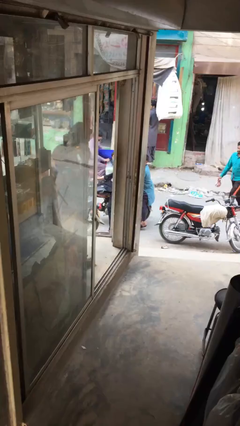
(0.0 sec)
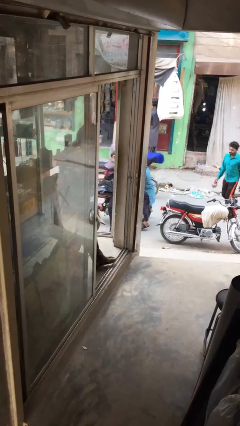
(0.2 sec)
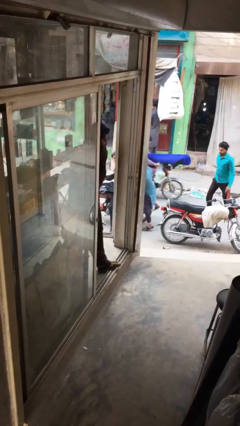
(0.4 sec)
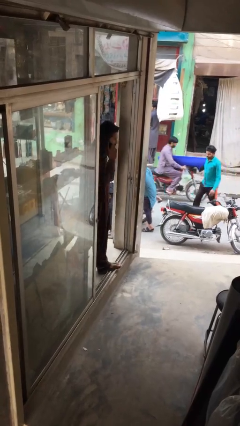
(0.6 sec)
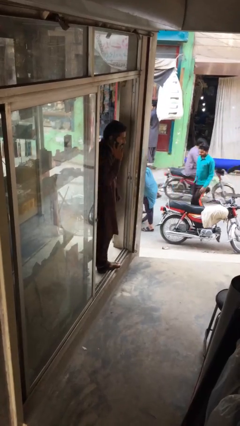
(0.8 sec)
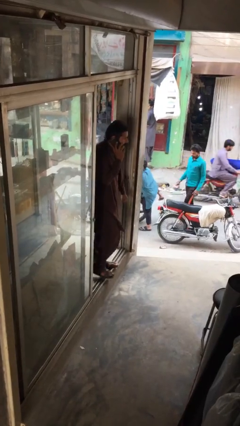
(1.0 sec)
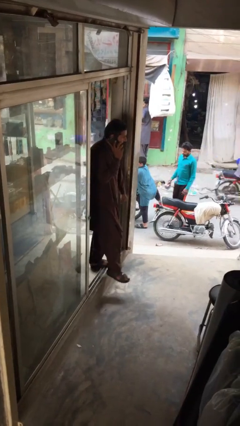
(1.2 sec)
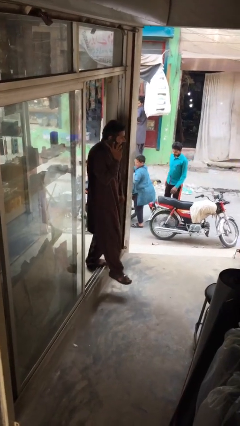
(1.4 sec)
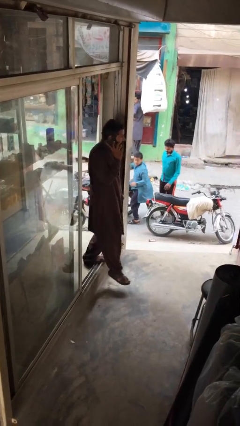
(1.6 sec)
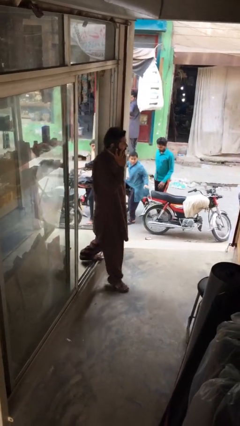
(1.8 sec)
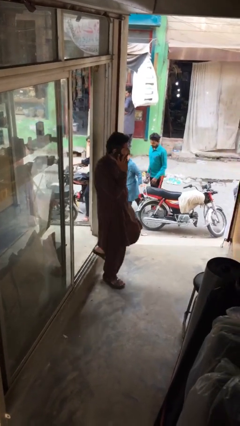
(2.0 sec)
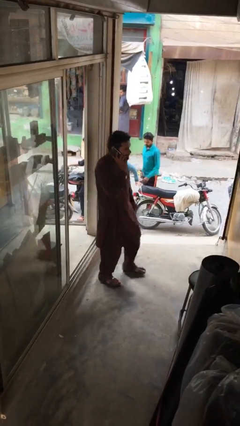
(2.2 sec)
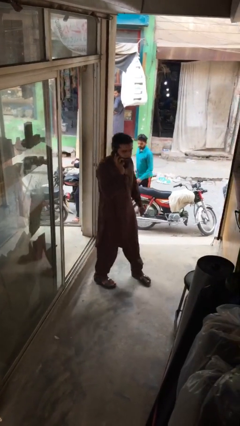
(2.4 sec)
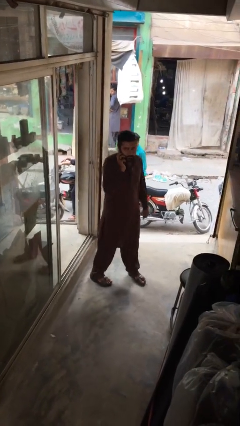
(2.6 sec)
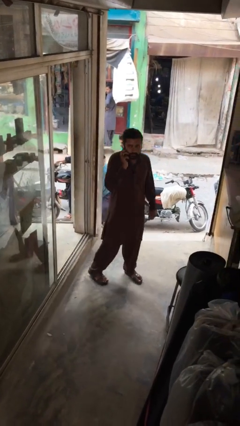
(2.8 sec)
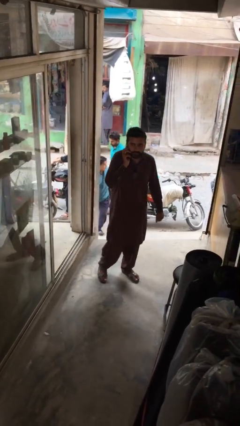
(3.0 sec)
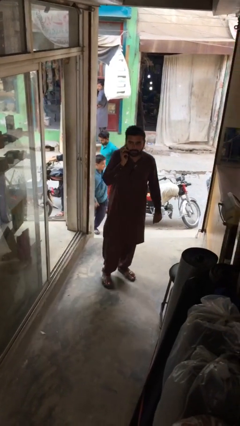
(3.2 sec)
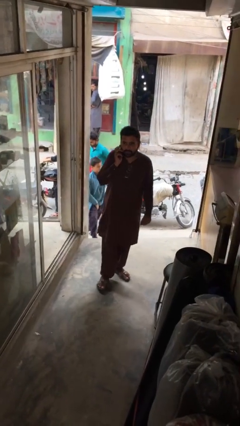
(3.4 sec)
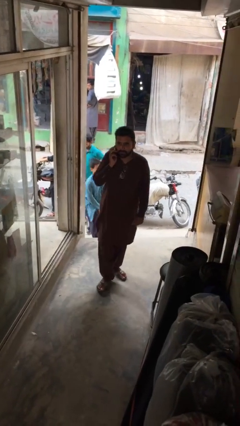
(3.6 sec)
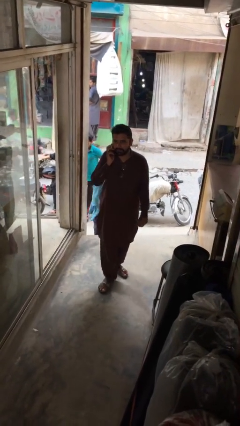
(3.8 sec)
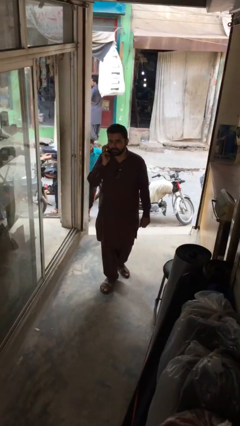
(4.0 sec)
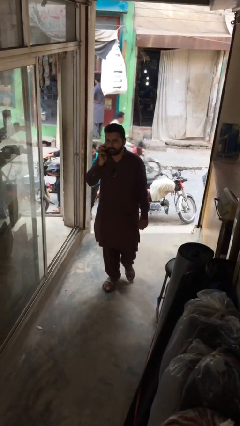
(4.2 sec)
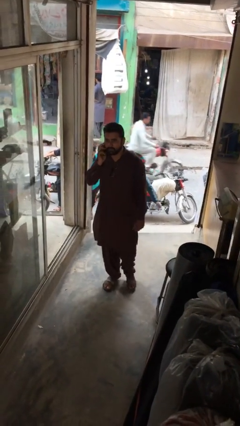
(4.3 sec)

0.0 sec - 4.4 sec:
person enters scene through structure

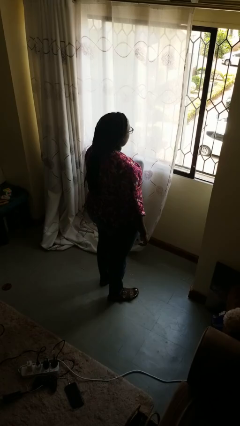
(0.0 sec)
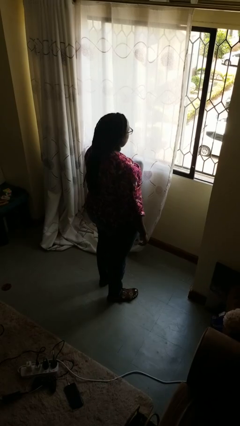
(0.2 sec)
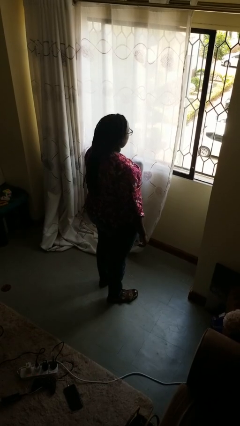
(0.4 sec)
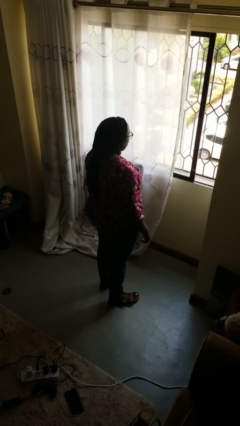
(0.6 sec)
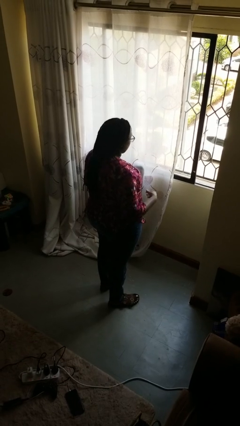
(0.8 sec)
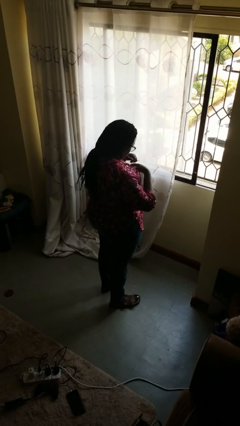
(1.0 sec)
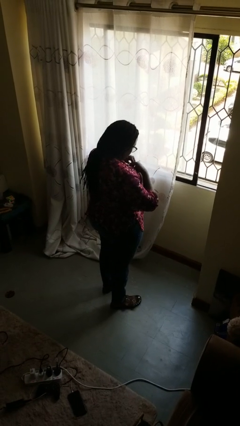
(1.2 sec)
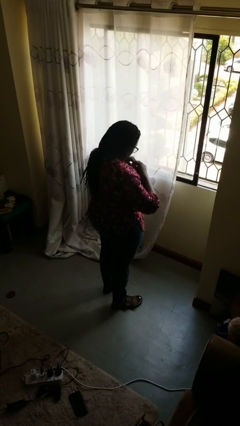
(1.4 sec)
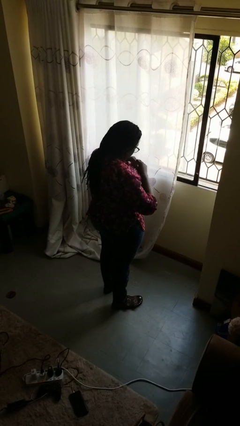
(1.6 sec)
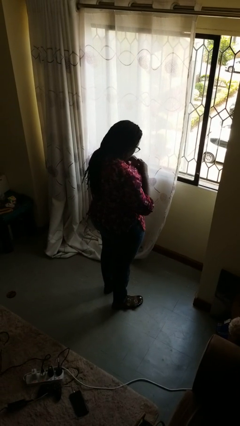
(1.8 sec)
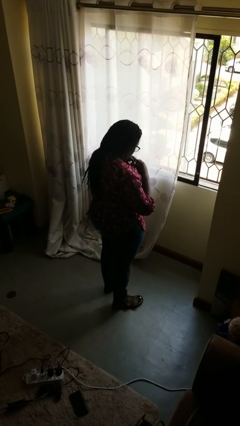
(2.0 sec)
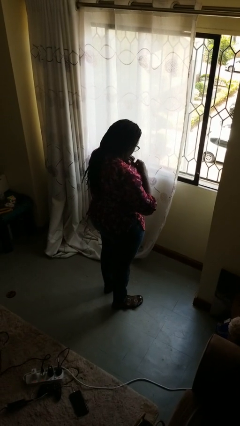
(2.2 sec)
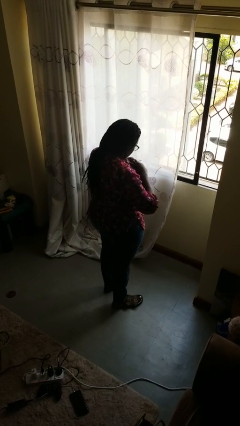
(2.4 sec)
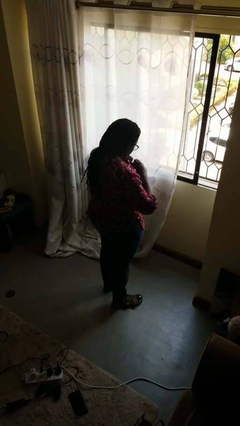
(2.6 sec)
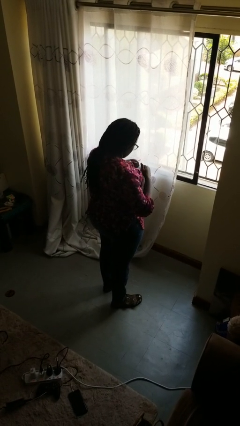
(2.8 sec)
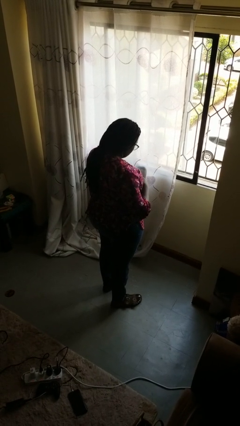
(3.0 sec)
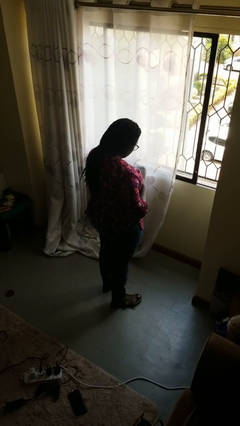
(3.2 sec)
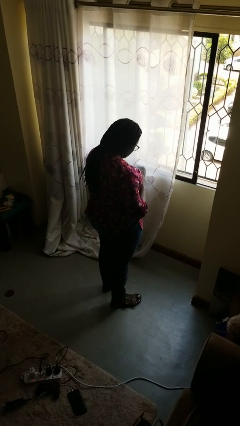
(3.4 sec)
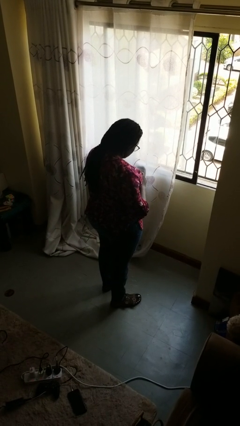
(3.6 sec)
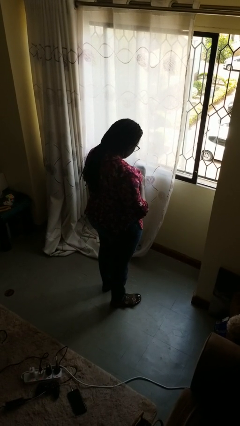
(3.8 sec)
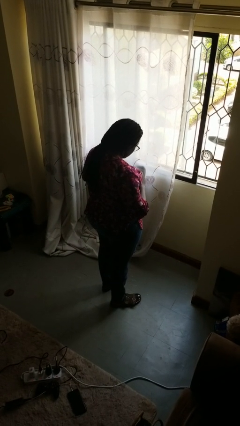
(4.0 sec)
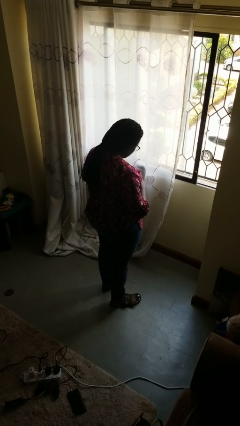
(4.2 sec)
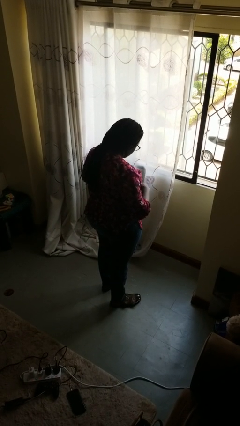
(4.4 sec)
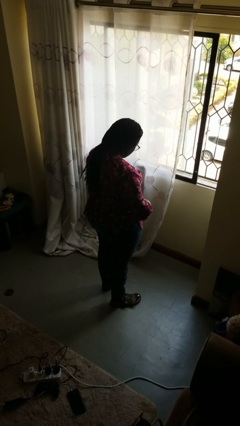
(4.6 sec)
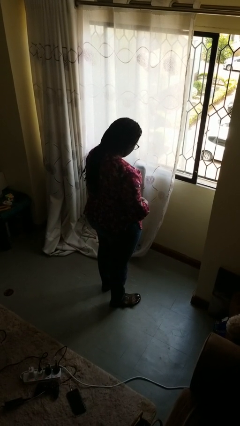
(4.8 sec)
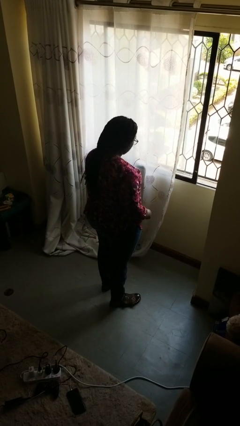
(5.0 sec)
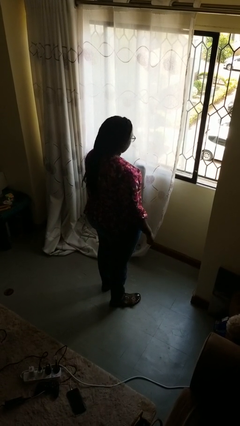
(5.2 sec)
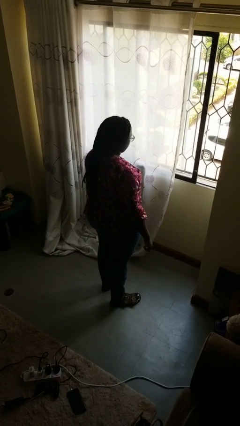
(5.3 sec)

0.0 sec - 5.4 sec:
person unbuttons shirt

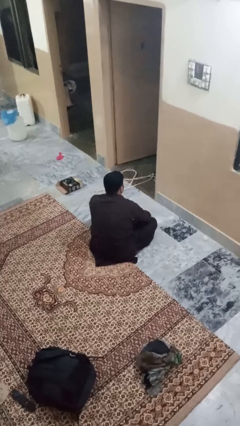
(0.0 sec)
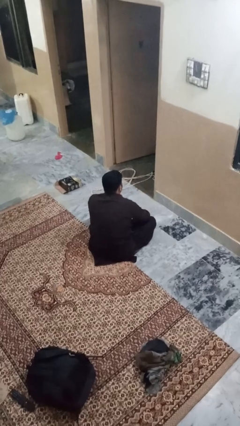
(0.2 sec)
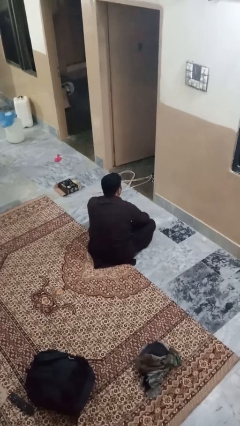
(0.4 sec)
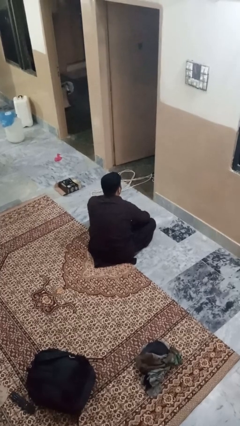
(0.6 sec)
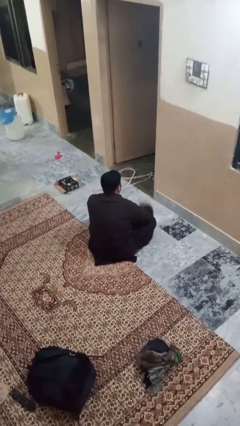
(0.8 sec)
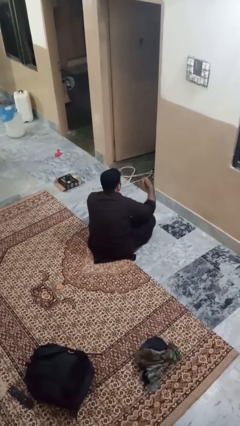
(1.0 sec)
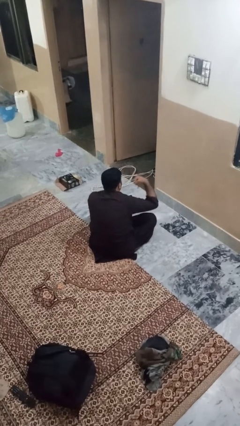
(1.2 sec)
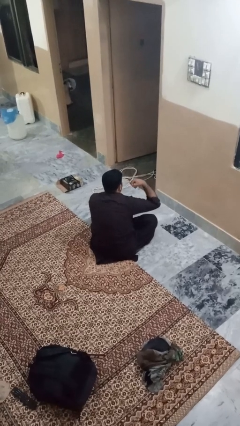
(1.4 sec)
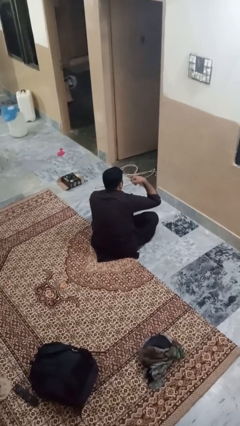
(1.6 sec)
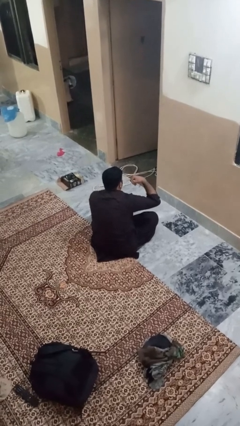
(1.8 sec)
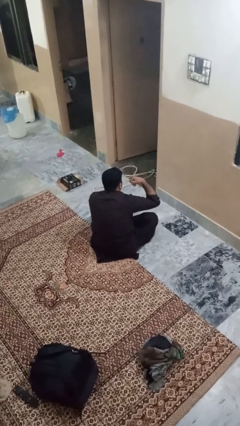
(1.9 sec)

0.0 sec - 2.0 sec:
person gestures call me

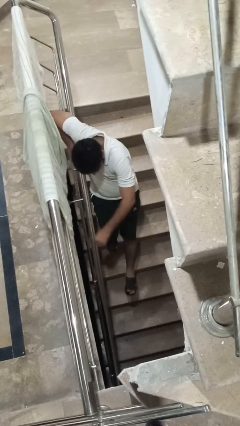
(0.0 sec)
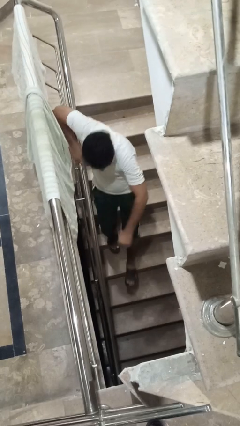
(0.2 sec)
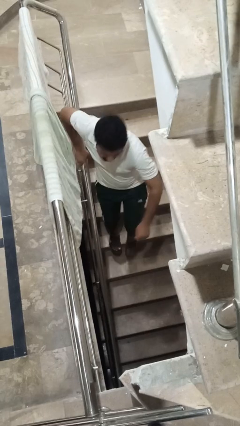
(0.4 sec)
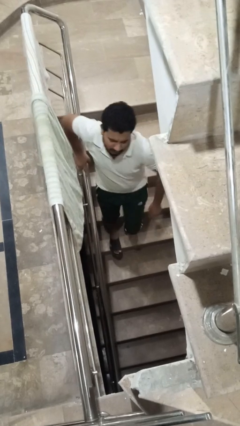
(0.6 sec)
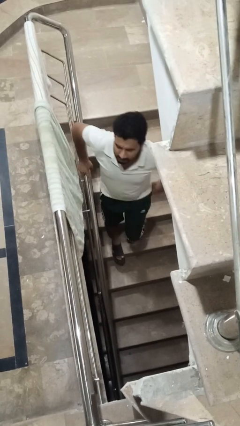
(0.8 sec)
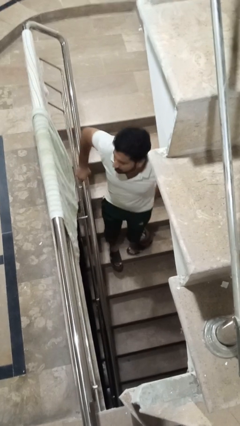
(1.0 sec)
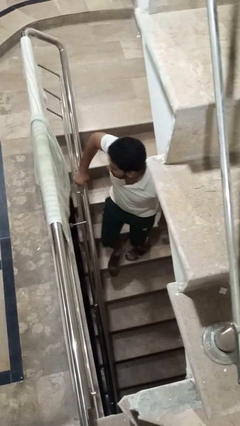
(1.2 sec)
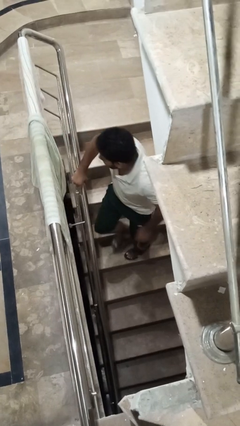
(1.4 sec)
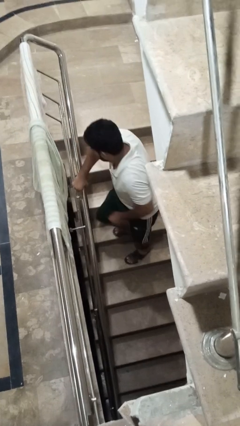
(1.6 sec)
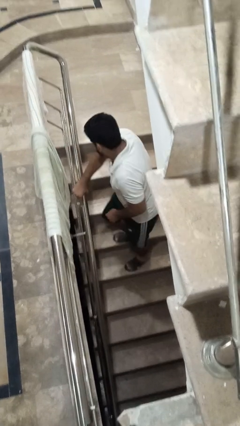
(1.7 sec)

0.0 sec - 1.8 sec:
person trips on stair

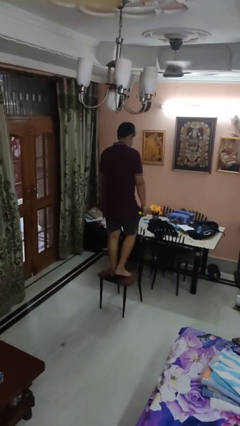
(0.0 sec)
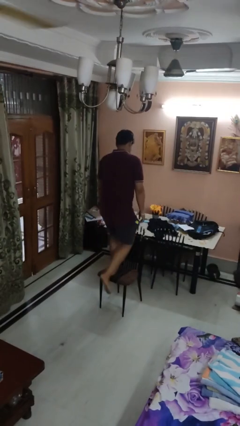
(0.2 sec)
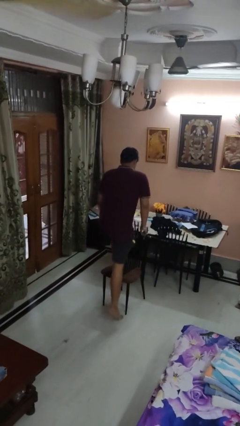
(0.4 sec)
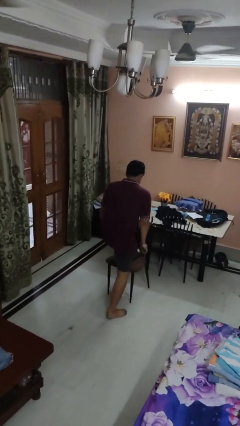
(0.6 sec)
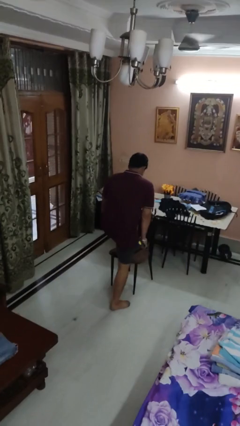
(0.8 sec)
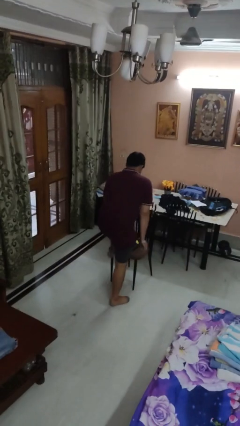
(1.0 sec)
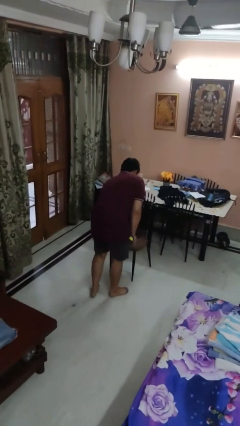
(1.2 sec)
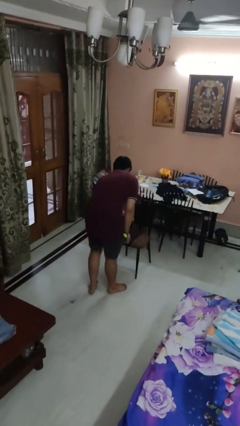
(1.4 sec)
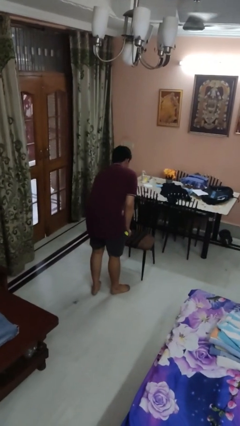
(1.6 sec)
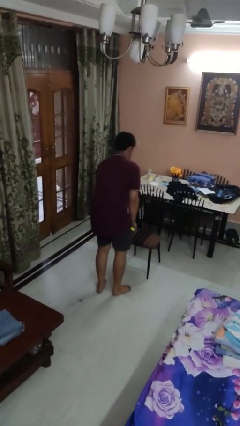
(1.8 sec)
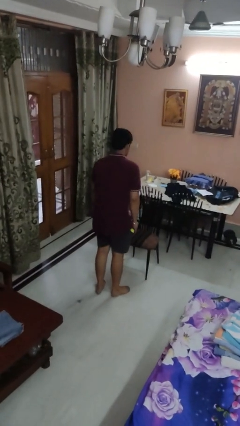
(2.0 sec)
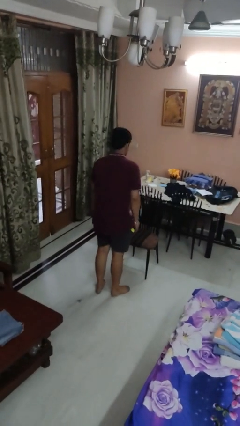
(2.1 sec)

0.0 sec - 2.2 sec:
person climbs off chair

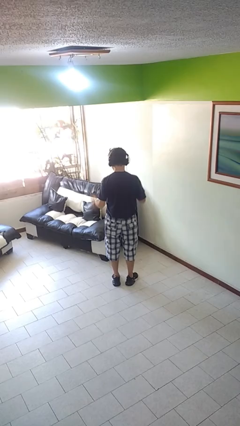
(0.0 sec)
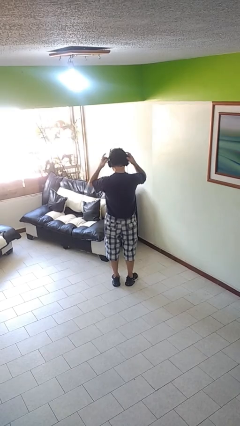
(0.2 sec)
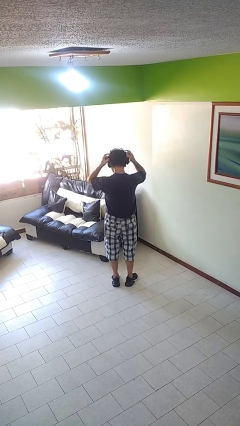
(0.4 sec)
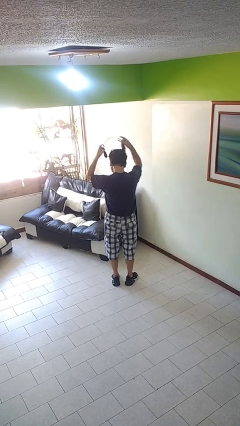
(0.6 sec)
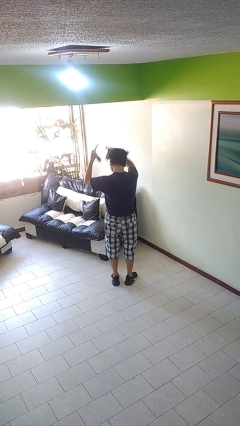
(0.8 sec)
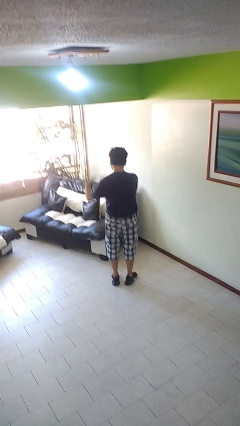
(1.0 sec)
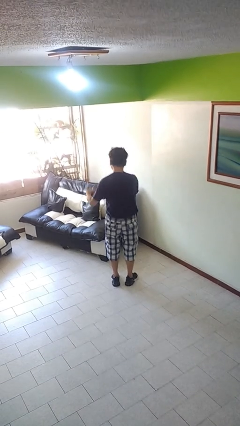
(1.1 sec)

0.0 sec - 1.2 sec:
person takes off headphones
